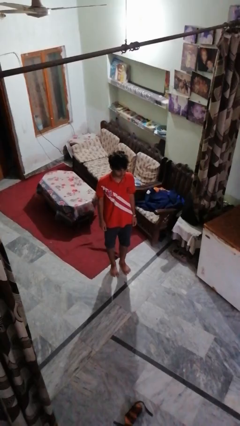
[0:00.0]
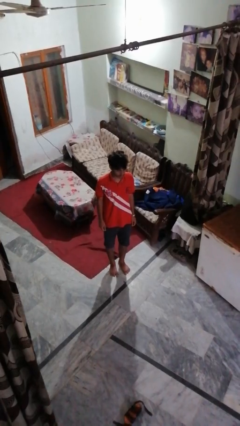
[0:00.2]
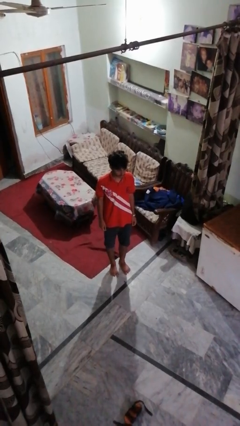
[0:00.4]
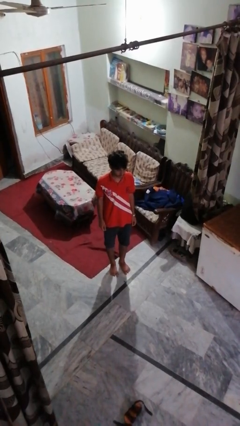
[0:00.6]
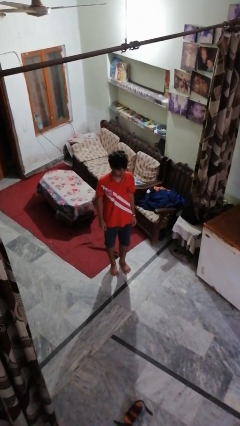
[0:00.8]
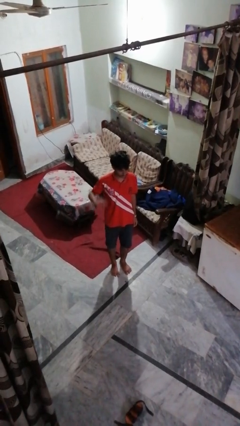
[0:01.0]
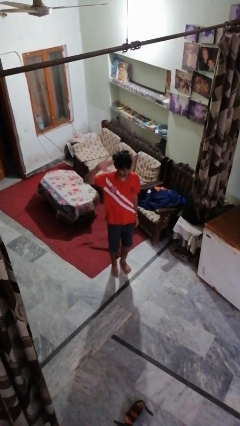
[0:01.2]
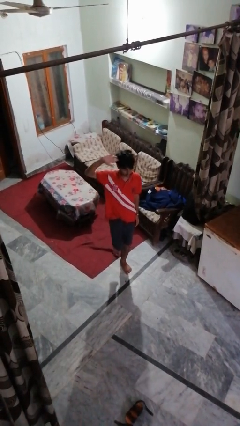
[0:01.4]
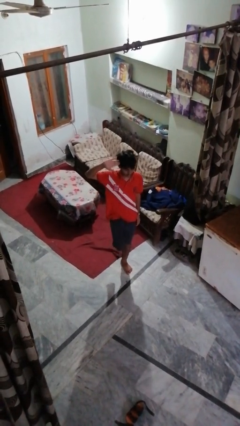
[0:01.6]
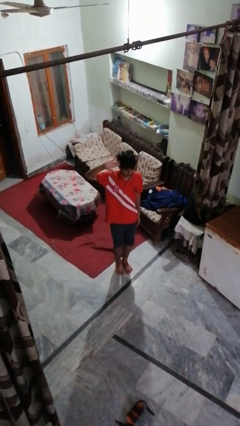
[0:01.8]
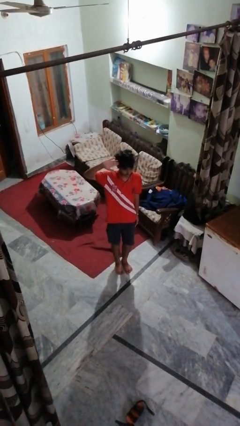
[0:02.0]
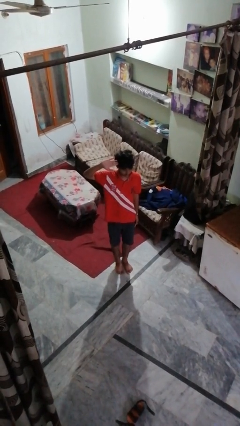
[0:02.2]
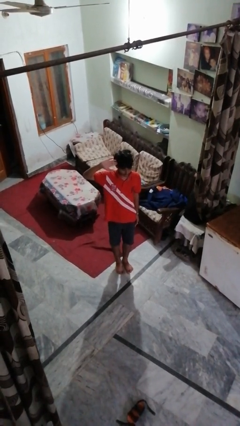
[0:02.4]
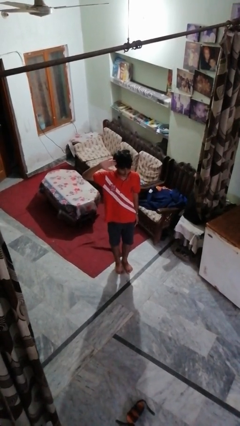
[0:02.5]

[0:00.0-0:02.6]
person salutes

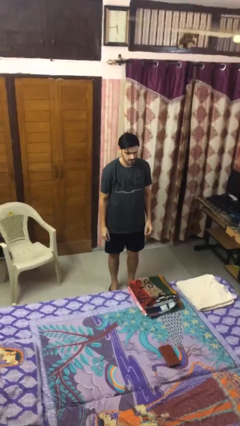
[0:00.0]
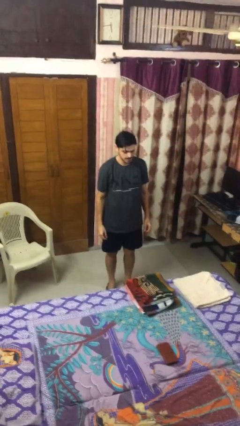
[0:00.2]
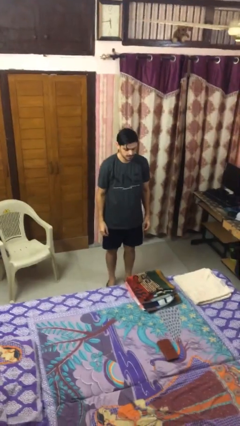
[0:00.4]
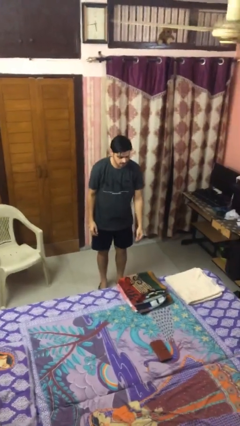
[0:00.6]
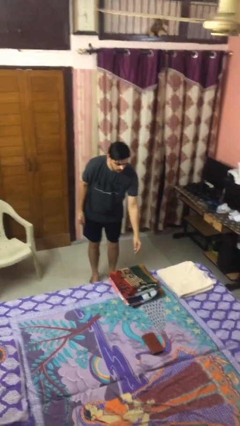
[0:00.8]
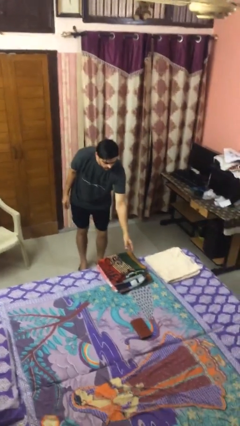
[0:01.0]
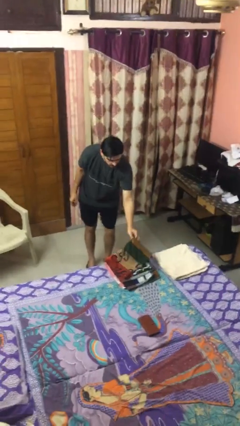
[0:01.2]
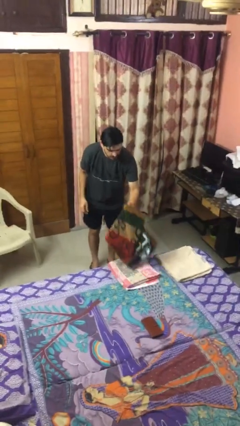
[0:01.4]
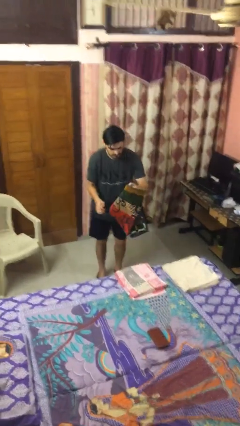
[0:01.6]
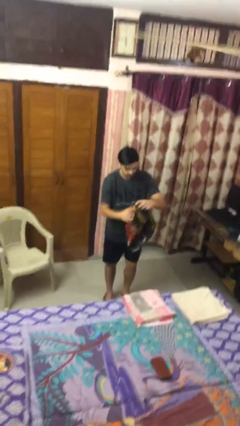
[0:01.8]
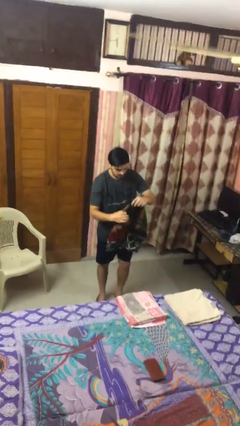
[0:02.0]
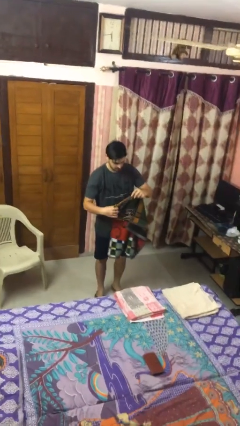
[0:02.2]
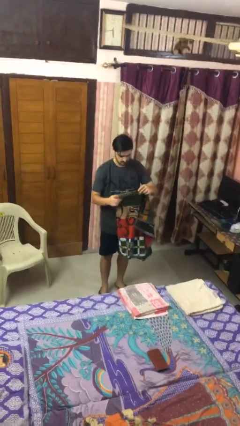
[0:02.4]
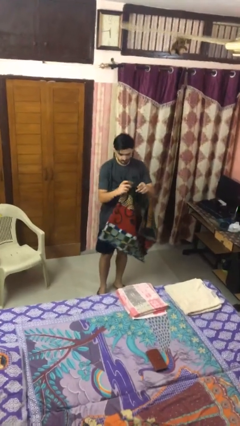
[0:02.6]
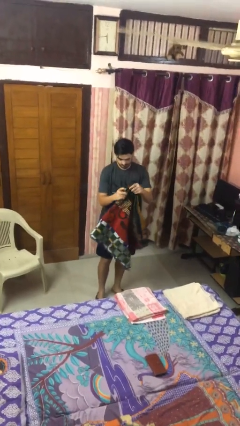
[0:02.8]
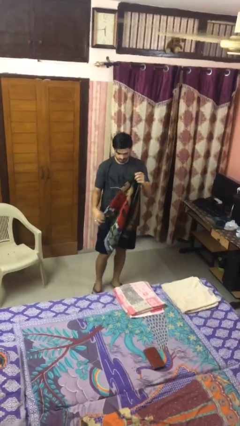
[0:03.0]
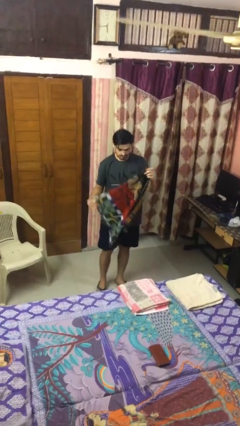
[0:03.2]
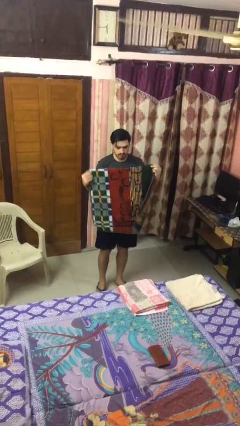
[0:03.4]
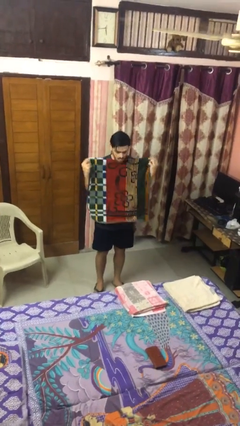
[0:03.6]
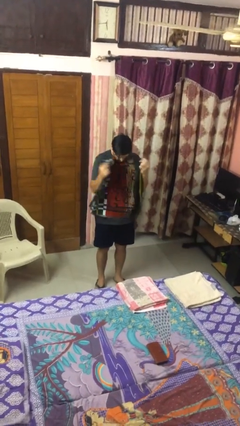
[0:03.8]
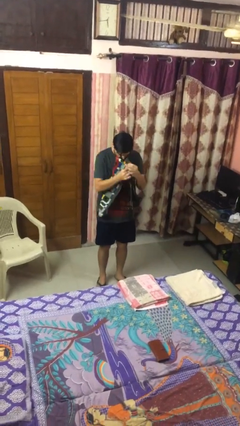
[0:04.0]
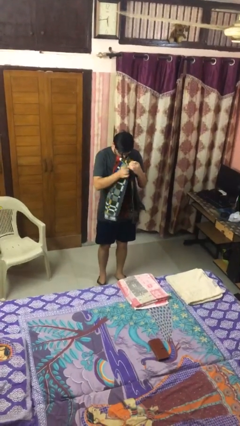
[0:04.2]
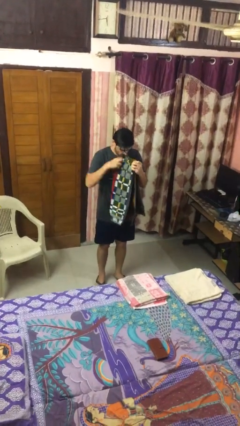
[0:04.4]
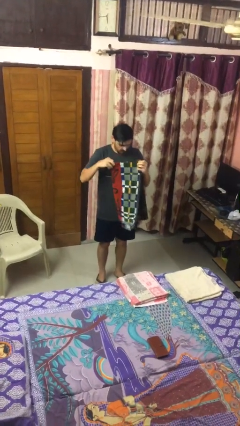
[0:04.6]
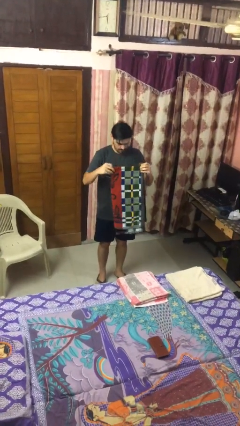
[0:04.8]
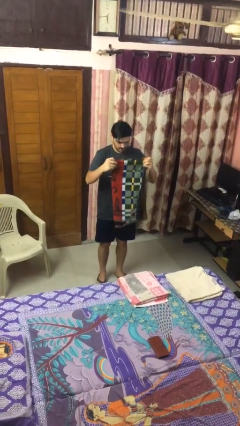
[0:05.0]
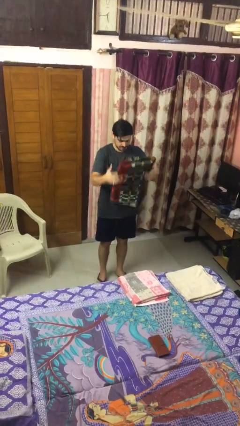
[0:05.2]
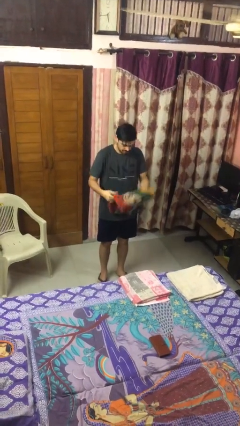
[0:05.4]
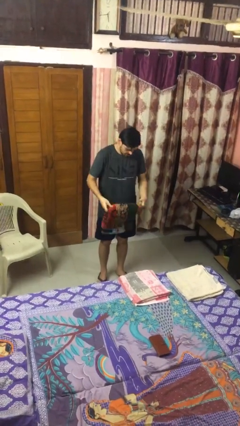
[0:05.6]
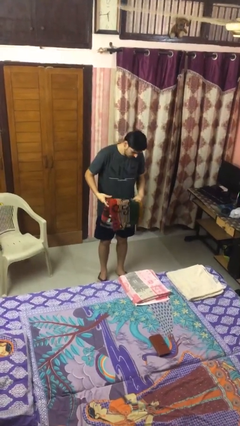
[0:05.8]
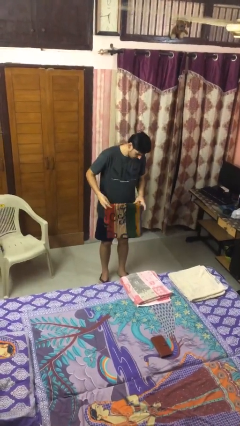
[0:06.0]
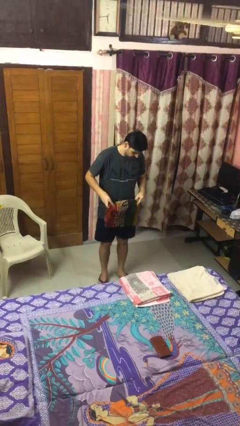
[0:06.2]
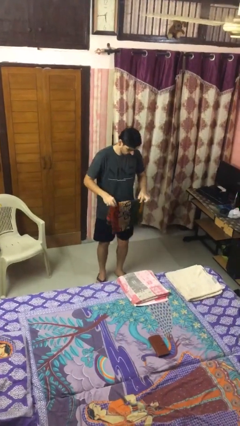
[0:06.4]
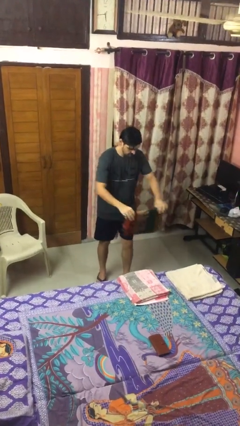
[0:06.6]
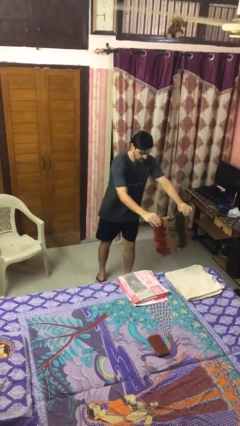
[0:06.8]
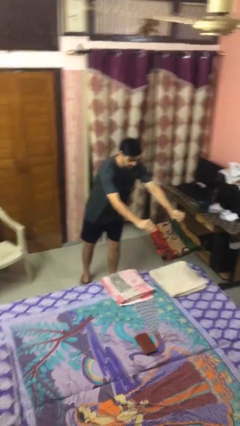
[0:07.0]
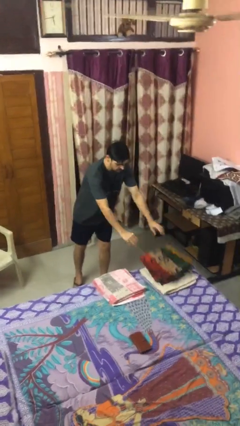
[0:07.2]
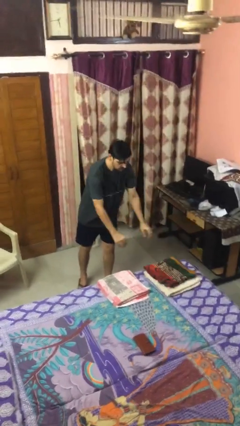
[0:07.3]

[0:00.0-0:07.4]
person folds towel

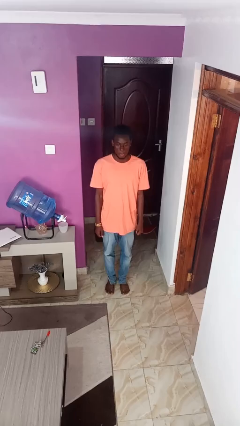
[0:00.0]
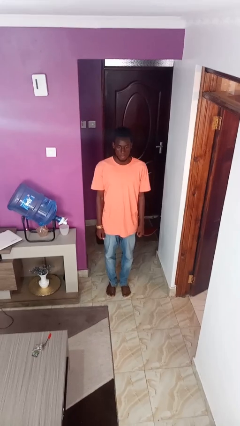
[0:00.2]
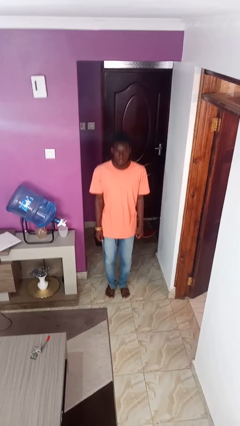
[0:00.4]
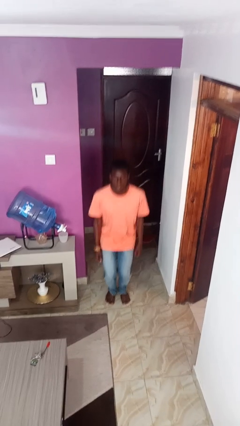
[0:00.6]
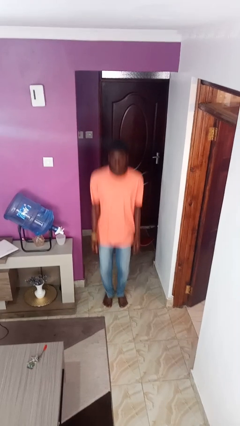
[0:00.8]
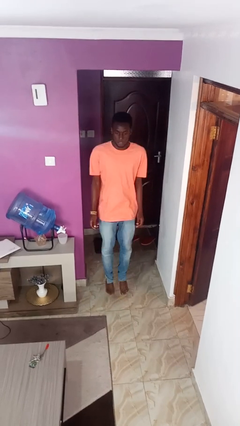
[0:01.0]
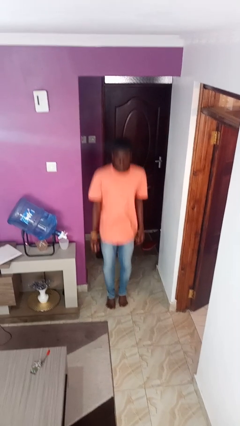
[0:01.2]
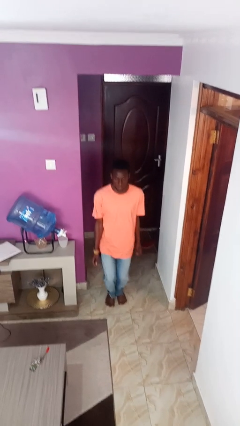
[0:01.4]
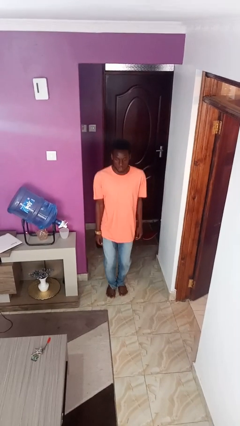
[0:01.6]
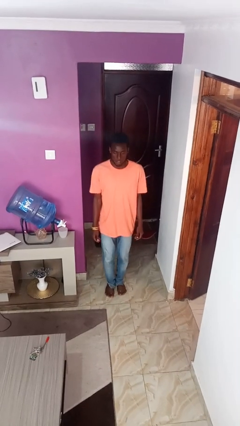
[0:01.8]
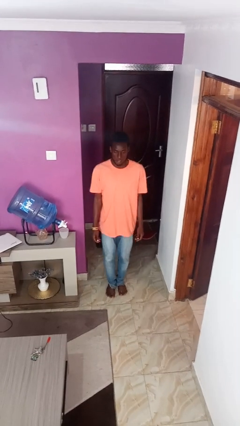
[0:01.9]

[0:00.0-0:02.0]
person jumps

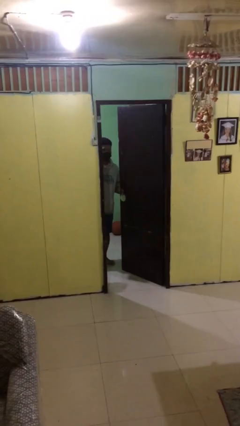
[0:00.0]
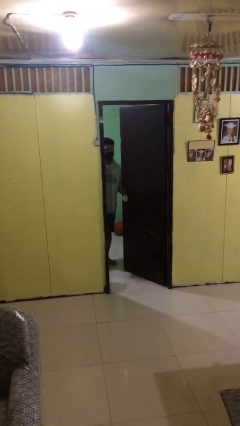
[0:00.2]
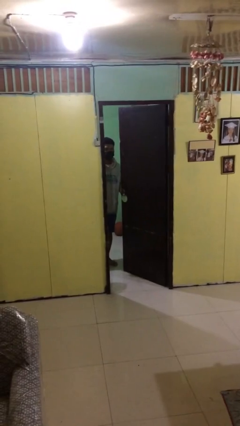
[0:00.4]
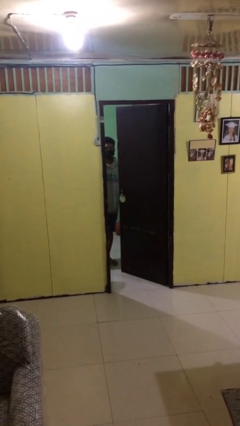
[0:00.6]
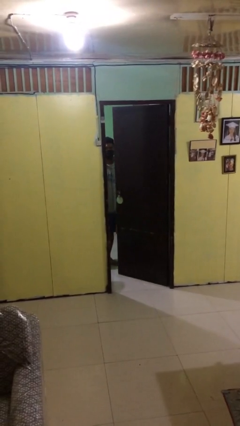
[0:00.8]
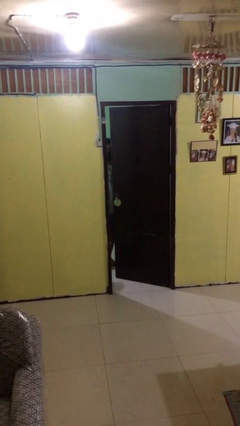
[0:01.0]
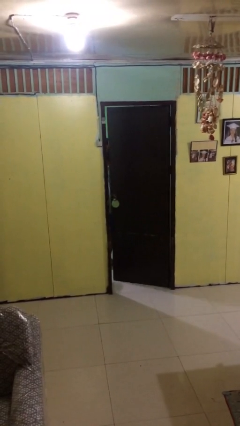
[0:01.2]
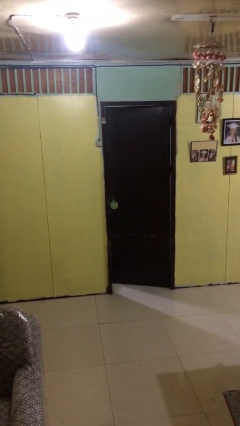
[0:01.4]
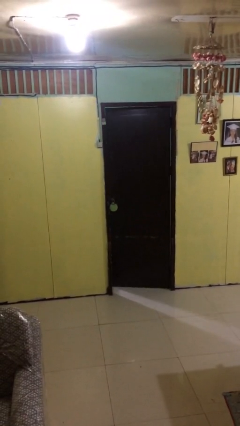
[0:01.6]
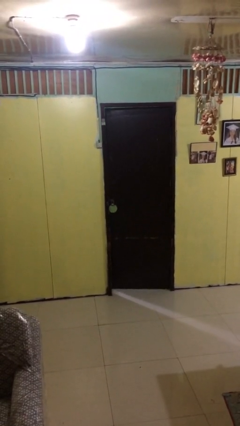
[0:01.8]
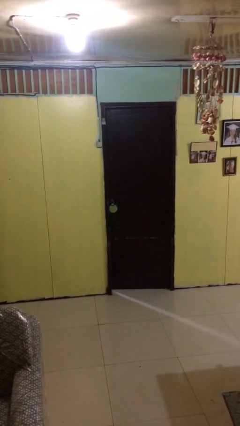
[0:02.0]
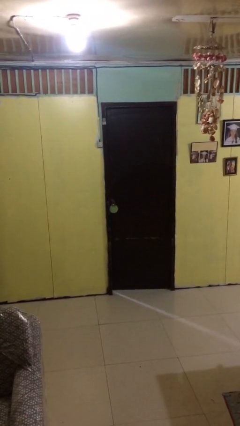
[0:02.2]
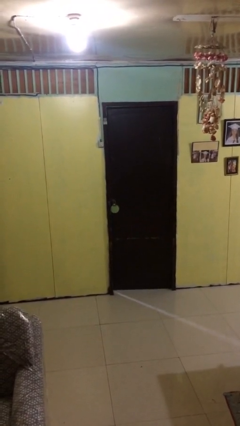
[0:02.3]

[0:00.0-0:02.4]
person closes facility door

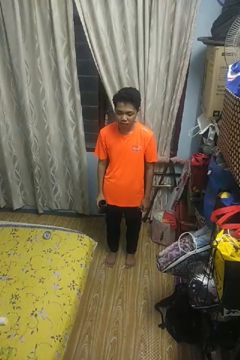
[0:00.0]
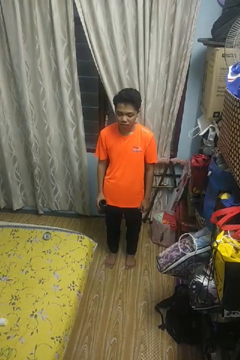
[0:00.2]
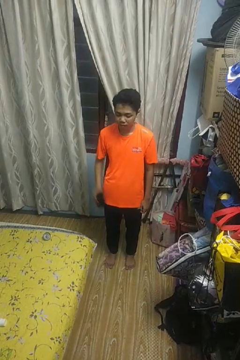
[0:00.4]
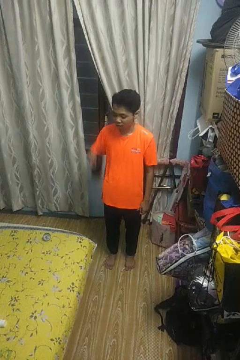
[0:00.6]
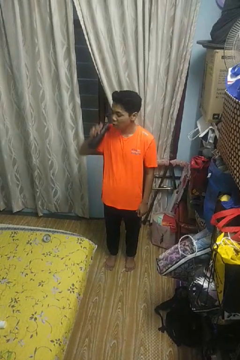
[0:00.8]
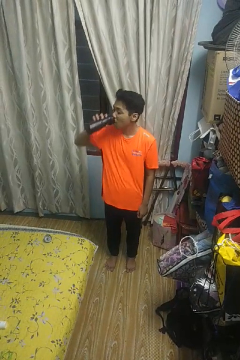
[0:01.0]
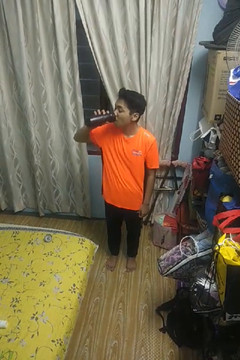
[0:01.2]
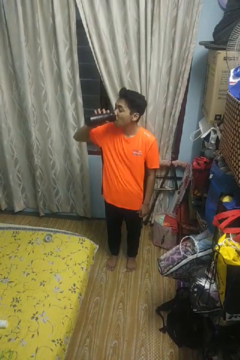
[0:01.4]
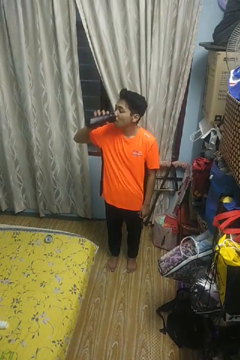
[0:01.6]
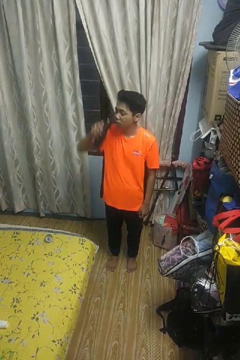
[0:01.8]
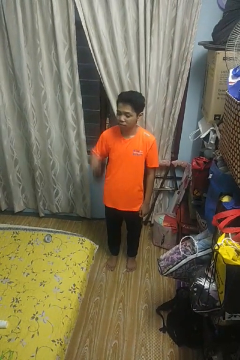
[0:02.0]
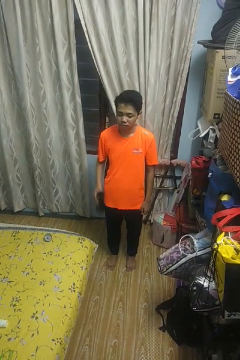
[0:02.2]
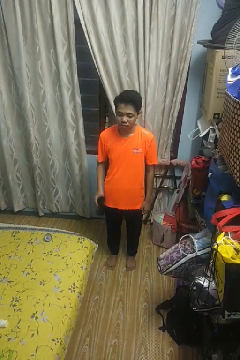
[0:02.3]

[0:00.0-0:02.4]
person drinks from bottle

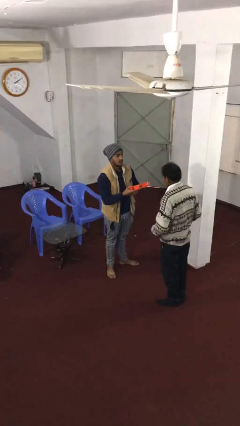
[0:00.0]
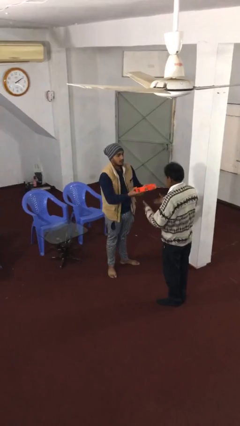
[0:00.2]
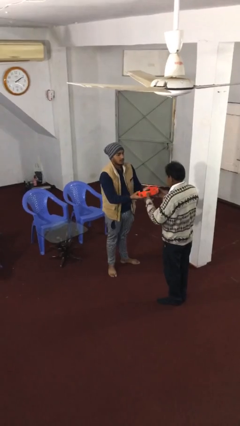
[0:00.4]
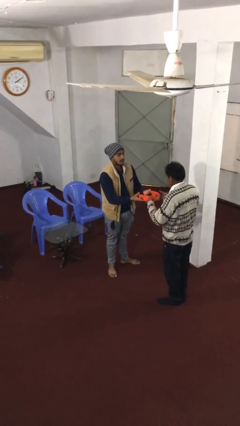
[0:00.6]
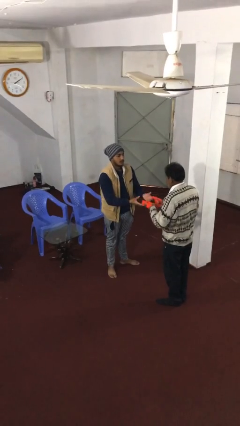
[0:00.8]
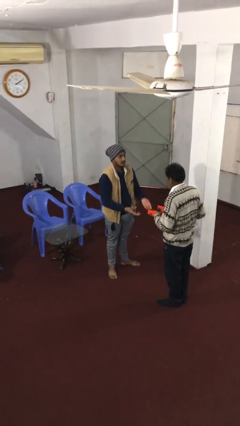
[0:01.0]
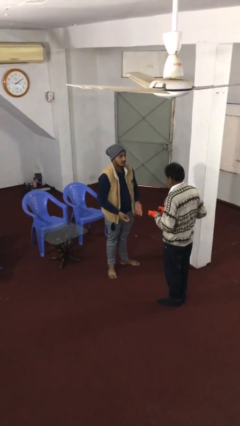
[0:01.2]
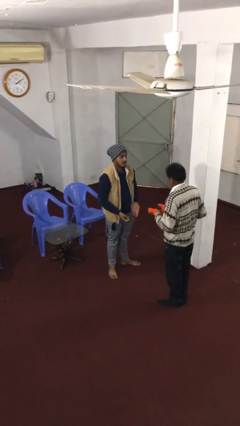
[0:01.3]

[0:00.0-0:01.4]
person transfers object to person
